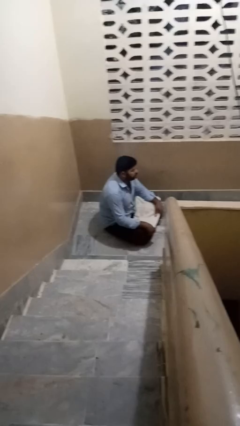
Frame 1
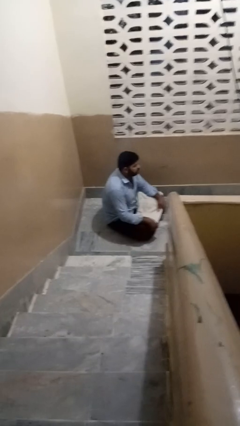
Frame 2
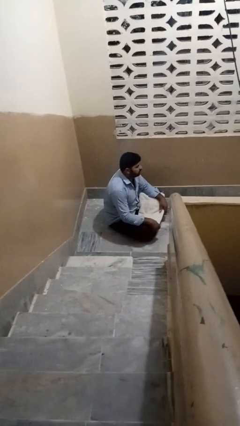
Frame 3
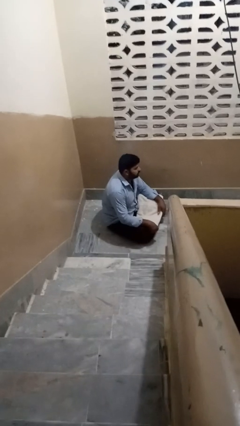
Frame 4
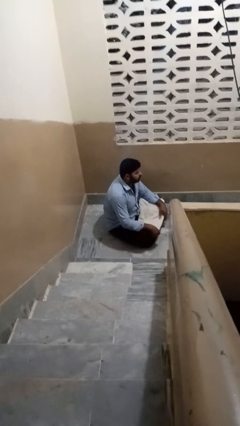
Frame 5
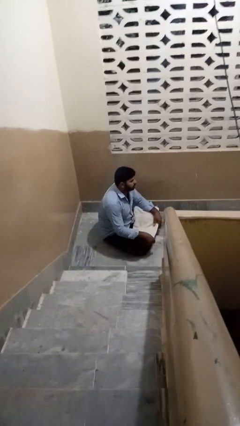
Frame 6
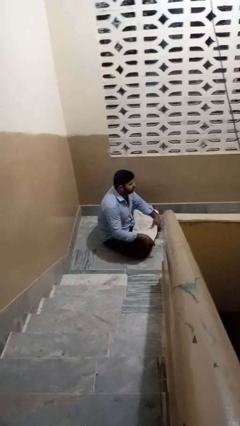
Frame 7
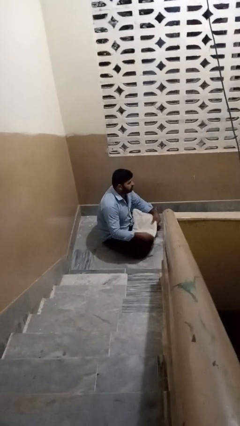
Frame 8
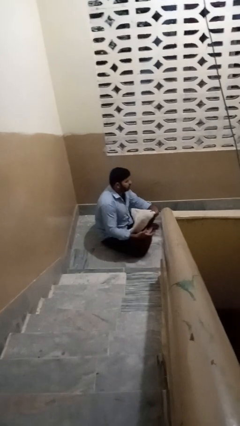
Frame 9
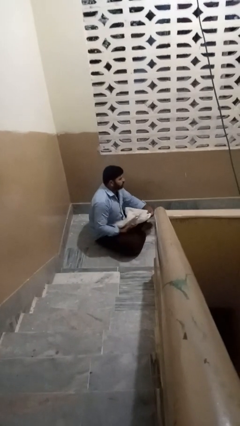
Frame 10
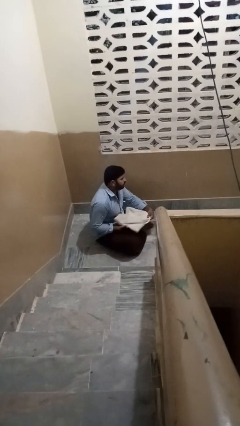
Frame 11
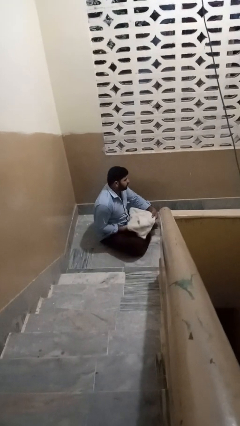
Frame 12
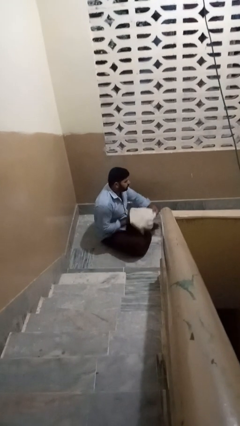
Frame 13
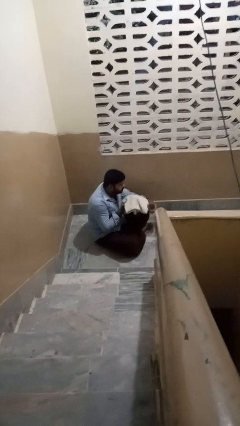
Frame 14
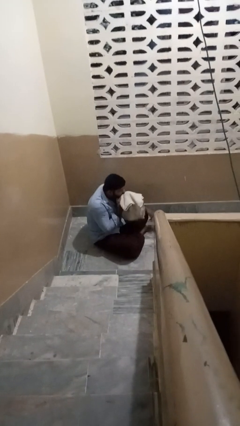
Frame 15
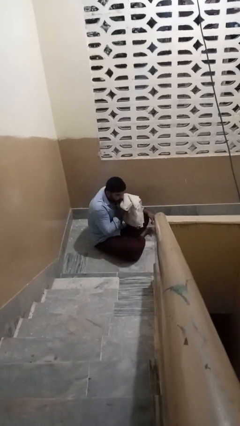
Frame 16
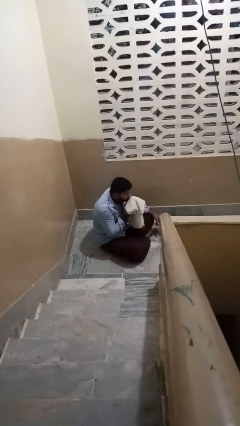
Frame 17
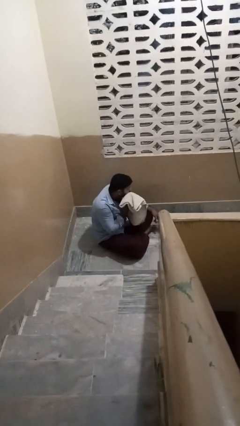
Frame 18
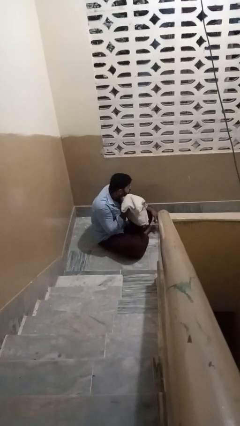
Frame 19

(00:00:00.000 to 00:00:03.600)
person wipes mouth with napkin

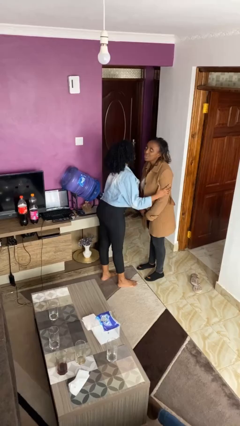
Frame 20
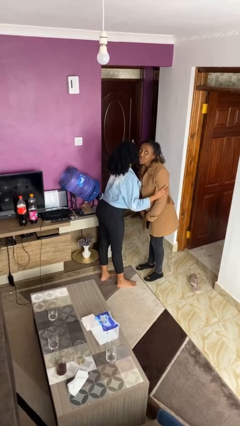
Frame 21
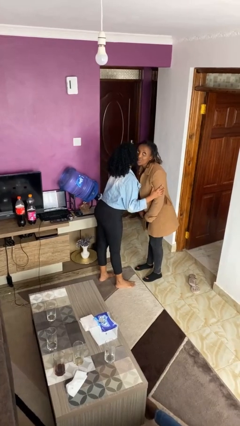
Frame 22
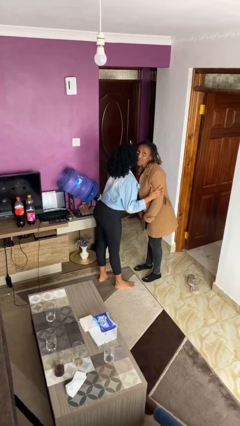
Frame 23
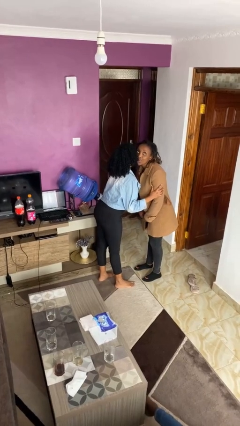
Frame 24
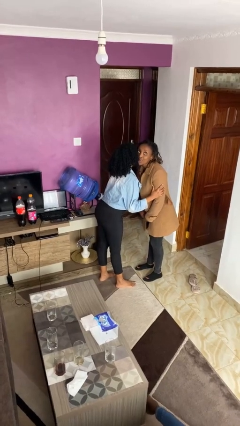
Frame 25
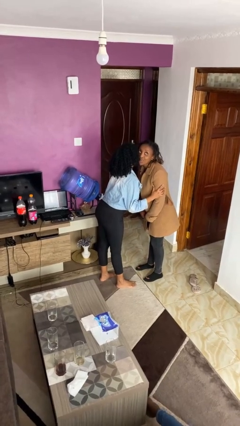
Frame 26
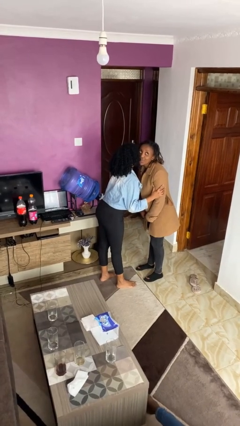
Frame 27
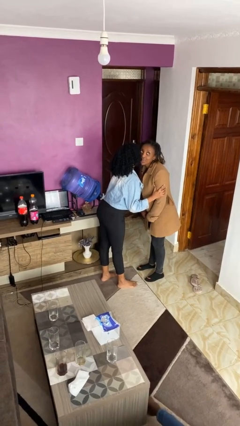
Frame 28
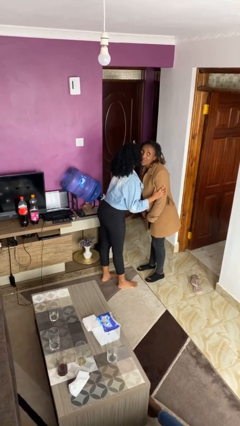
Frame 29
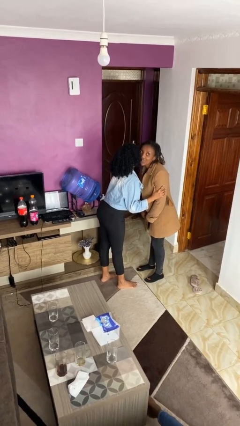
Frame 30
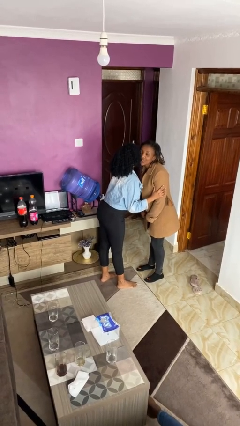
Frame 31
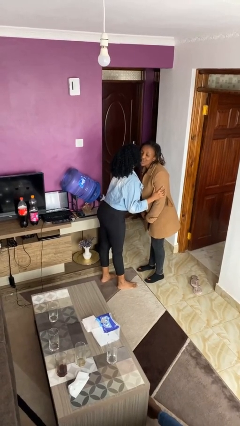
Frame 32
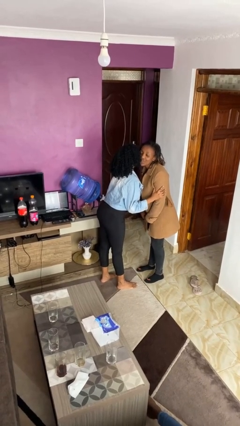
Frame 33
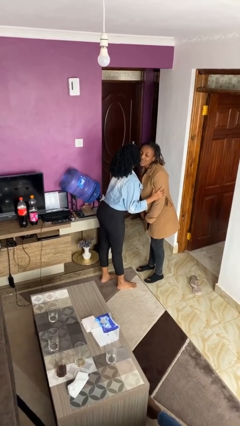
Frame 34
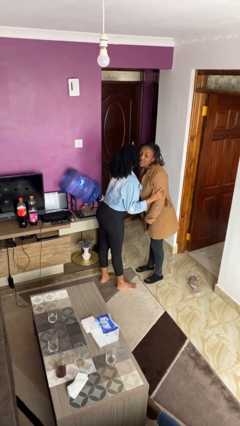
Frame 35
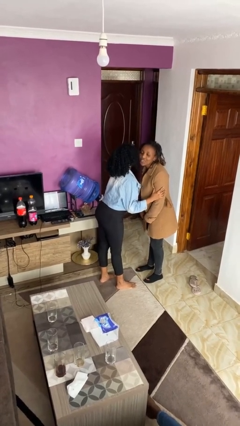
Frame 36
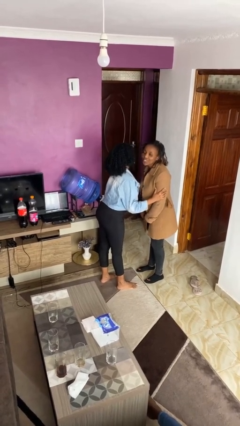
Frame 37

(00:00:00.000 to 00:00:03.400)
person kisses cheek of person

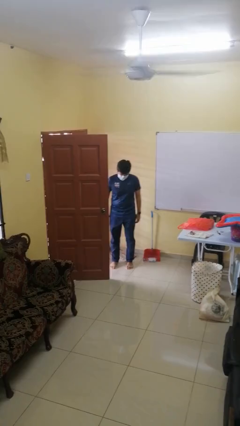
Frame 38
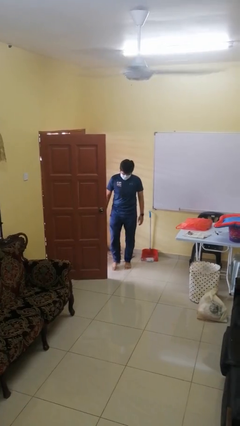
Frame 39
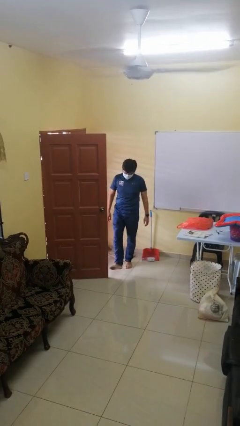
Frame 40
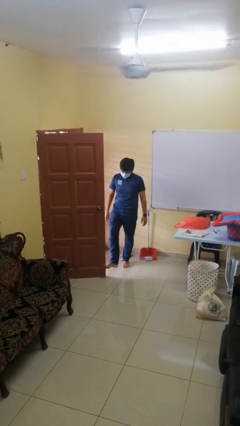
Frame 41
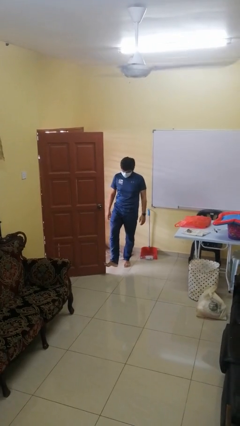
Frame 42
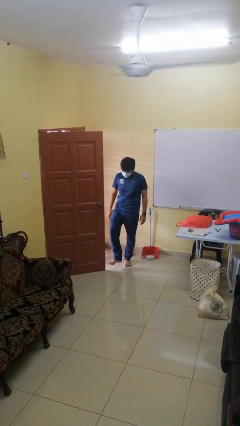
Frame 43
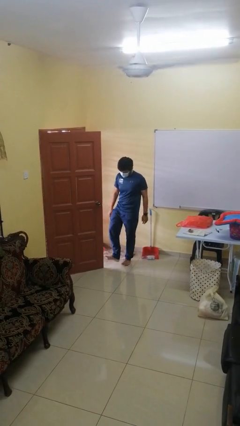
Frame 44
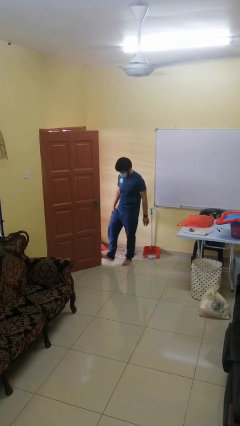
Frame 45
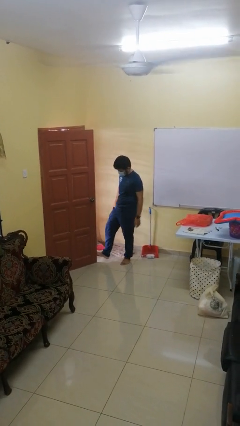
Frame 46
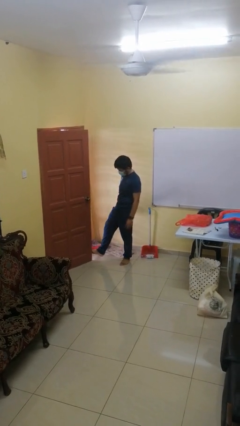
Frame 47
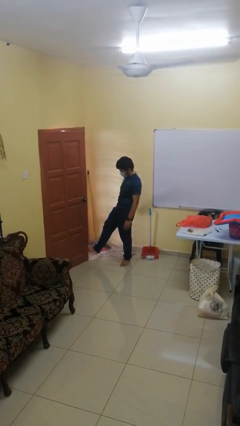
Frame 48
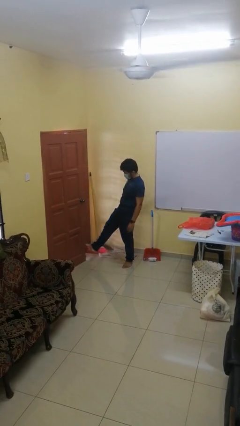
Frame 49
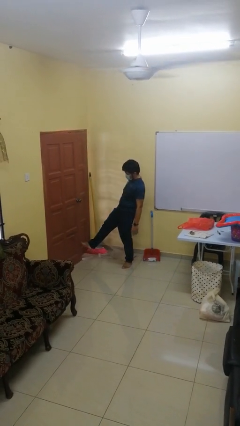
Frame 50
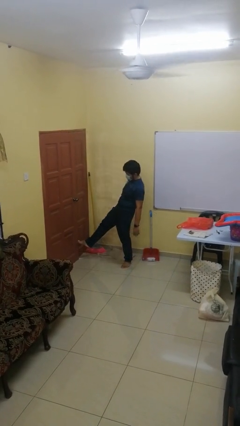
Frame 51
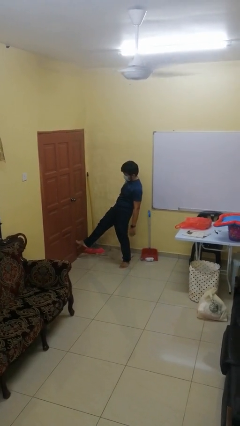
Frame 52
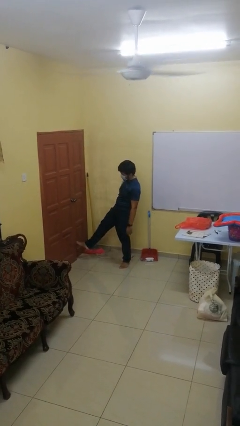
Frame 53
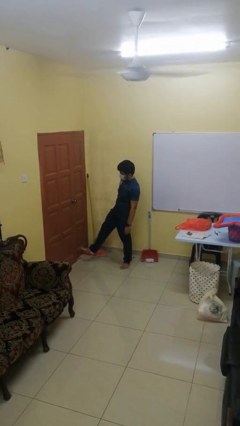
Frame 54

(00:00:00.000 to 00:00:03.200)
person closes door with foot

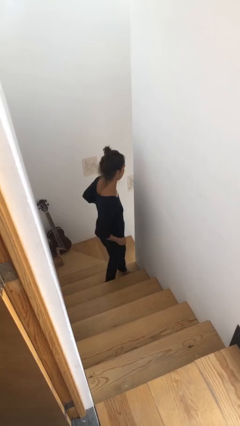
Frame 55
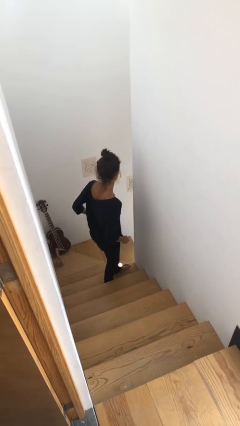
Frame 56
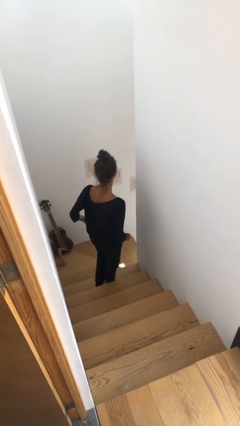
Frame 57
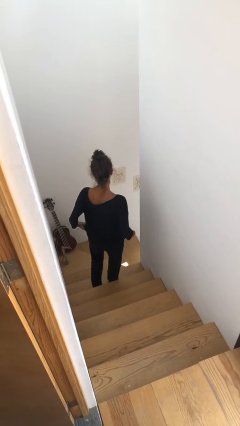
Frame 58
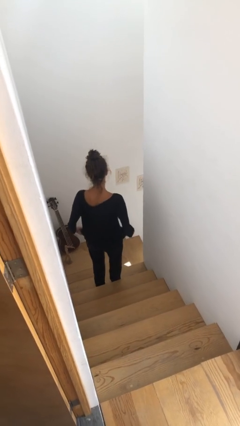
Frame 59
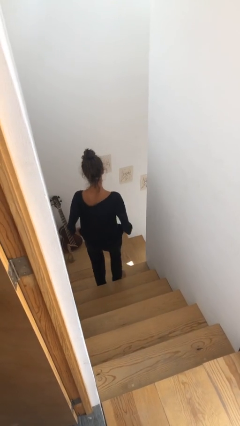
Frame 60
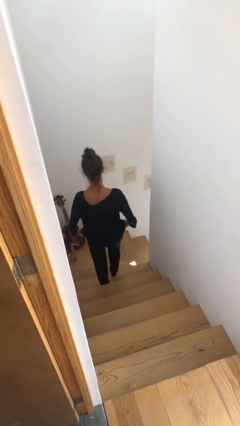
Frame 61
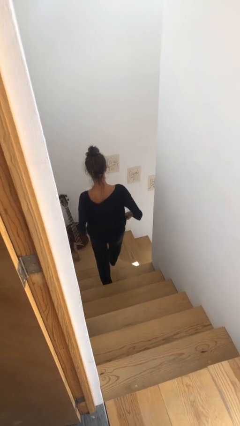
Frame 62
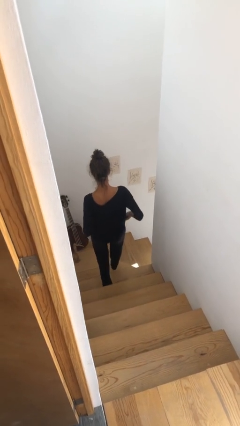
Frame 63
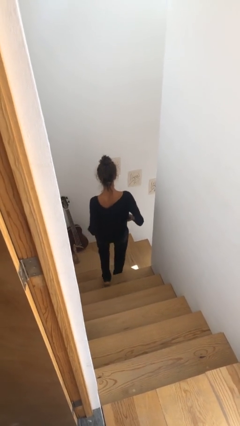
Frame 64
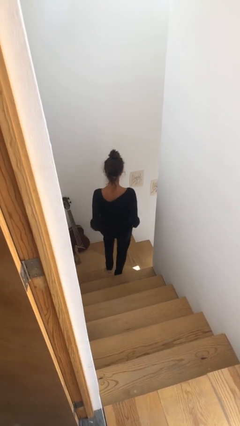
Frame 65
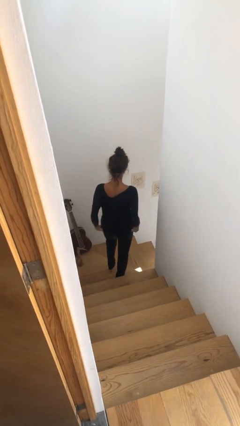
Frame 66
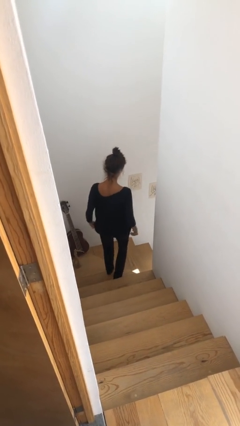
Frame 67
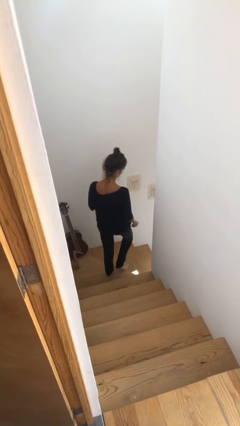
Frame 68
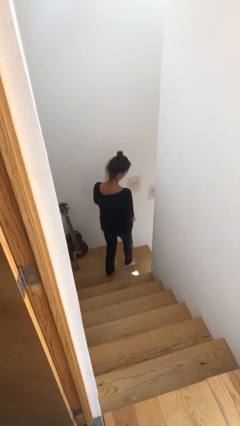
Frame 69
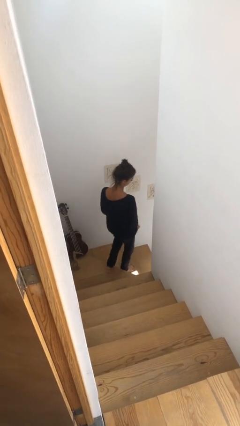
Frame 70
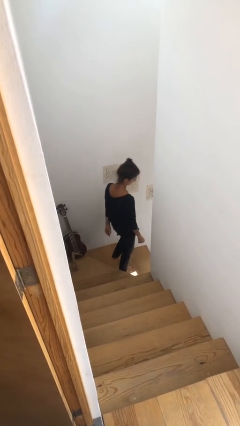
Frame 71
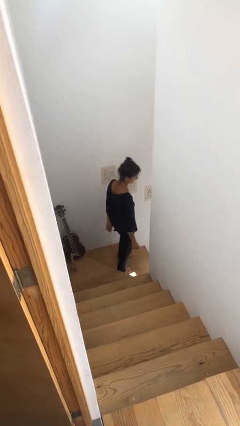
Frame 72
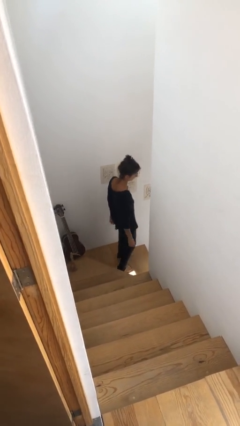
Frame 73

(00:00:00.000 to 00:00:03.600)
person climbs down stairs

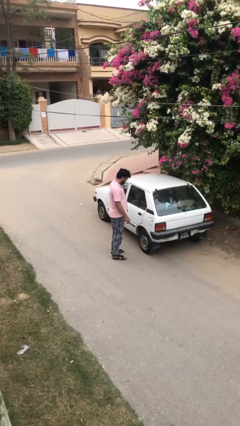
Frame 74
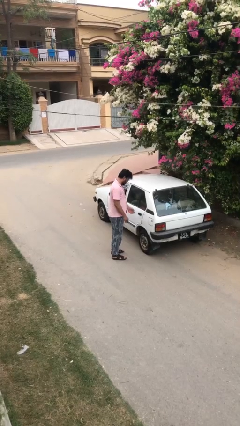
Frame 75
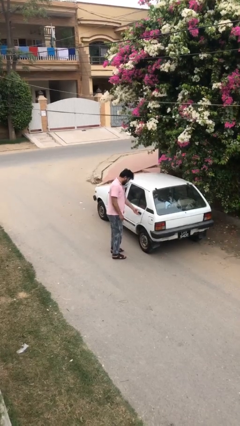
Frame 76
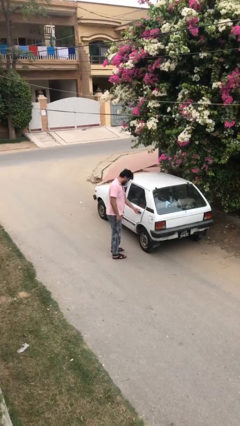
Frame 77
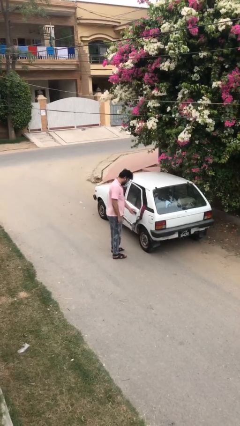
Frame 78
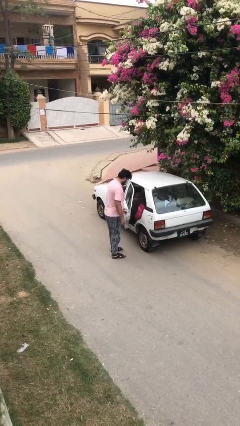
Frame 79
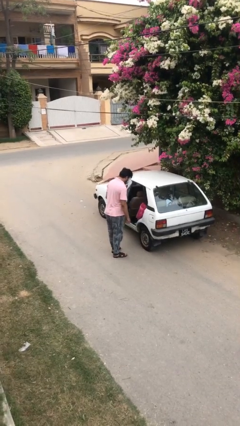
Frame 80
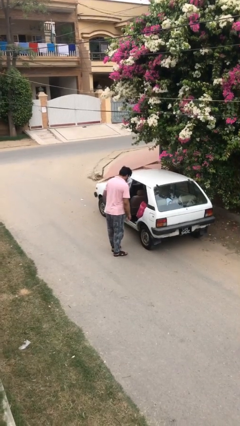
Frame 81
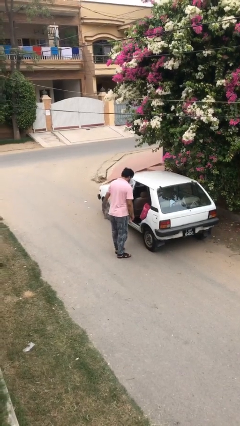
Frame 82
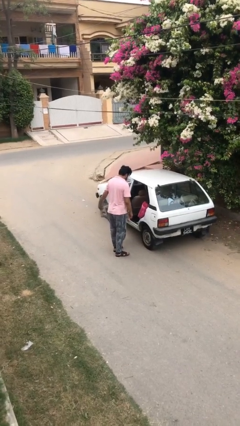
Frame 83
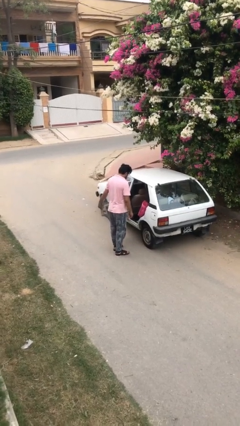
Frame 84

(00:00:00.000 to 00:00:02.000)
person opens car door

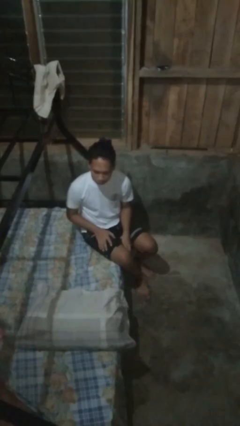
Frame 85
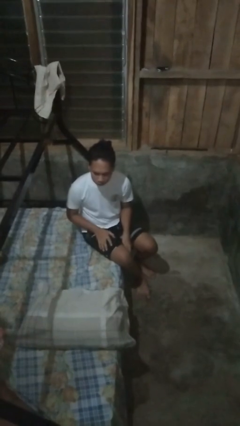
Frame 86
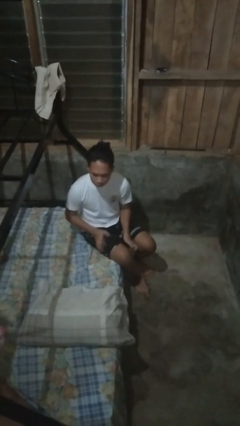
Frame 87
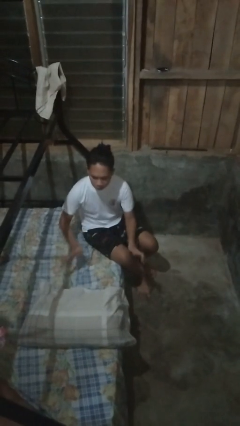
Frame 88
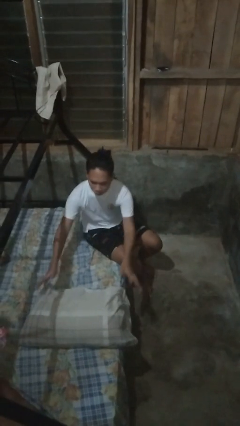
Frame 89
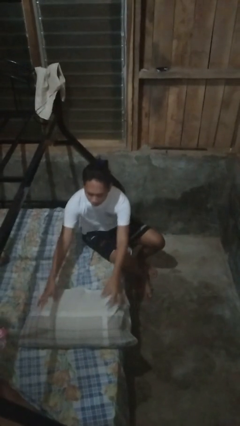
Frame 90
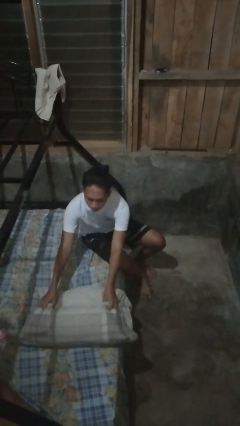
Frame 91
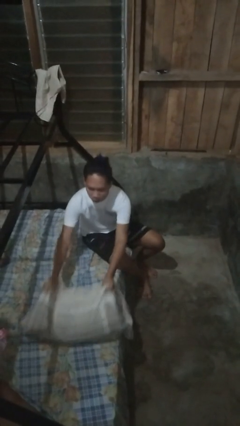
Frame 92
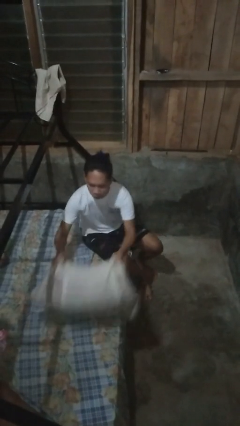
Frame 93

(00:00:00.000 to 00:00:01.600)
person picks up object from bed
